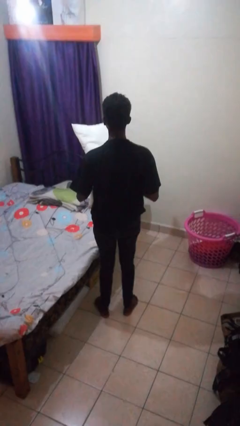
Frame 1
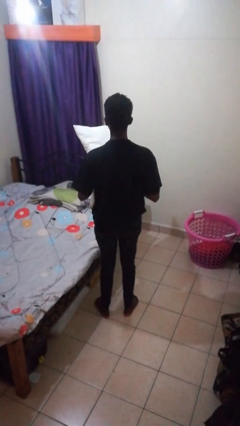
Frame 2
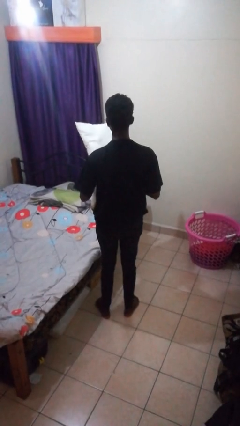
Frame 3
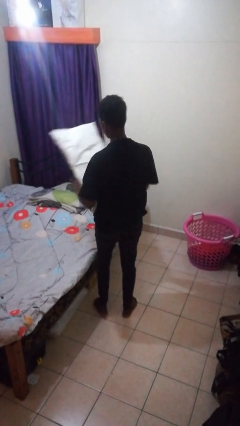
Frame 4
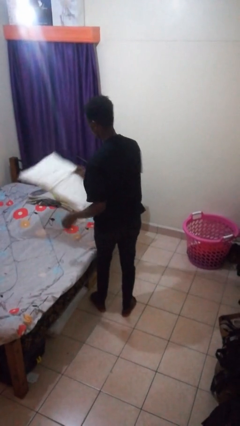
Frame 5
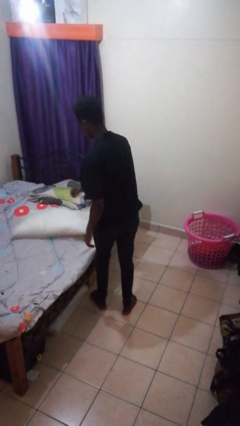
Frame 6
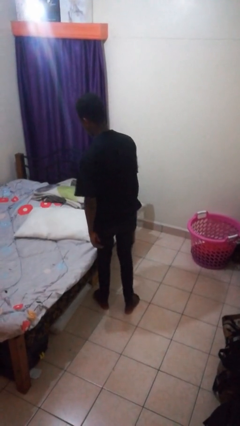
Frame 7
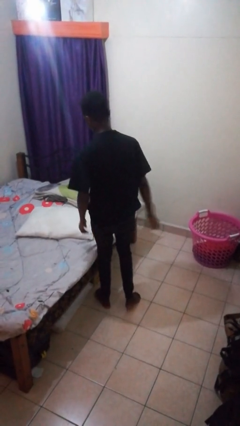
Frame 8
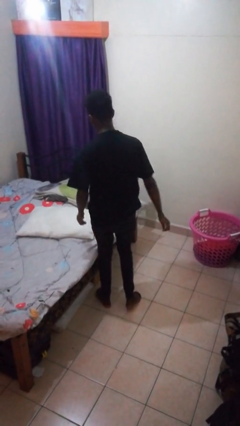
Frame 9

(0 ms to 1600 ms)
person puts down object on bed

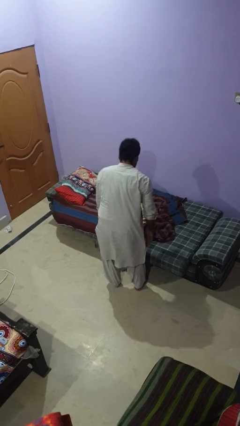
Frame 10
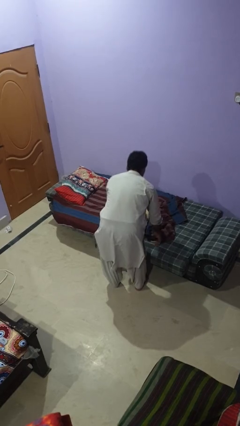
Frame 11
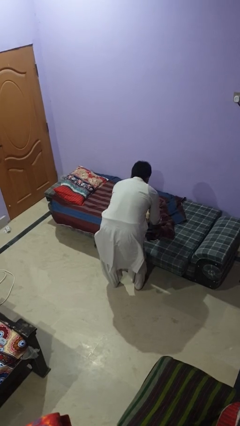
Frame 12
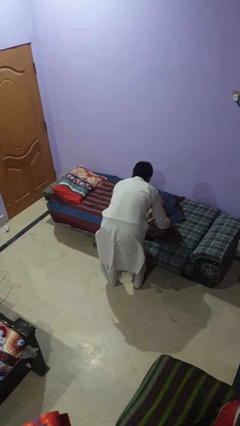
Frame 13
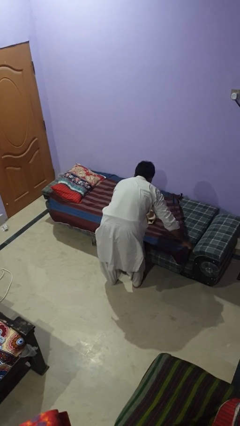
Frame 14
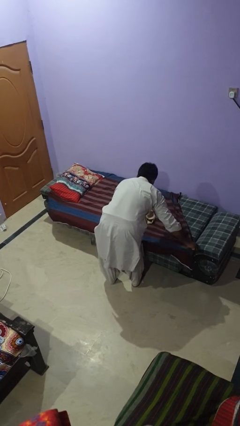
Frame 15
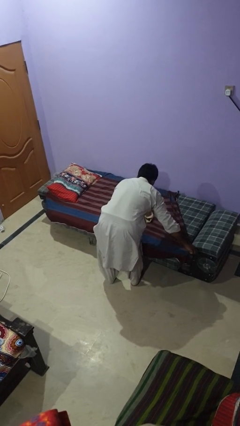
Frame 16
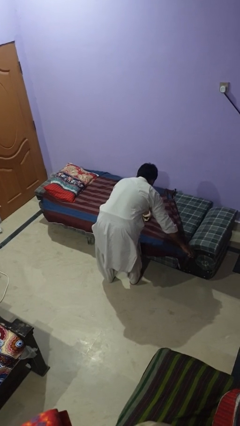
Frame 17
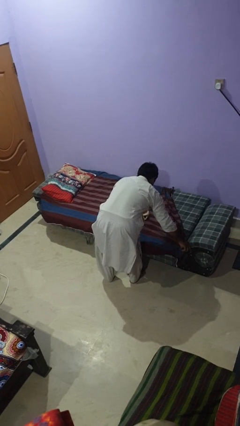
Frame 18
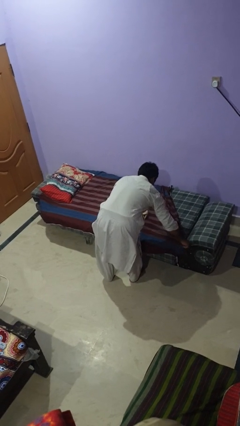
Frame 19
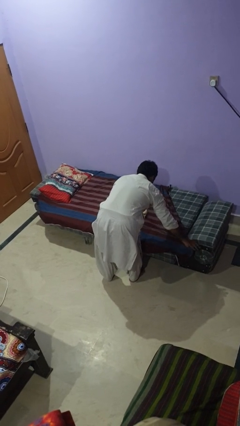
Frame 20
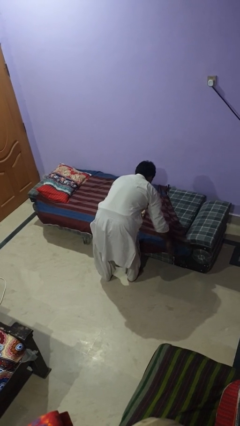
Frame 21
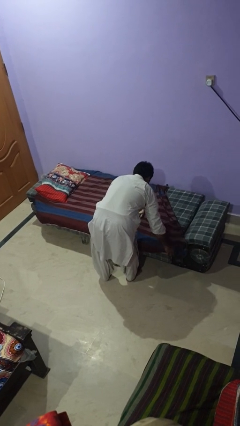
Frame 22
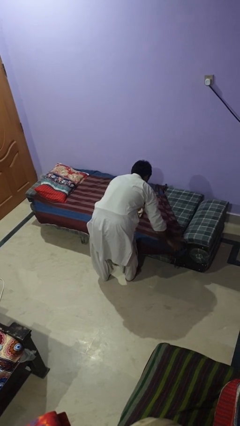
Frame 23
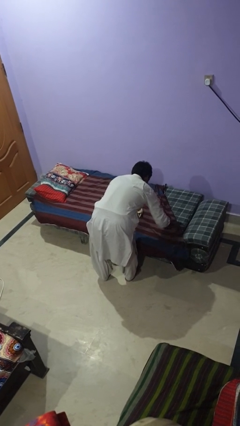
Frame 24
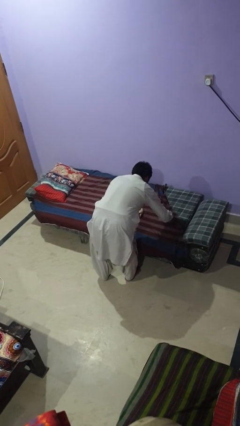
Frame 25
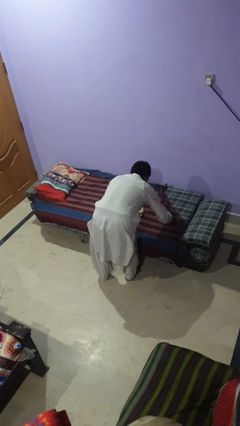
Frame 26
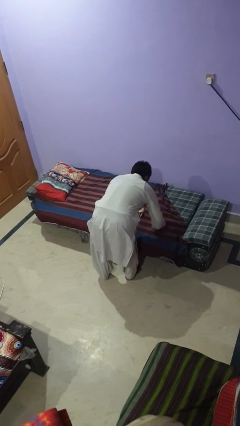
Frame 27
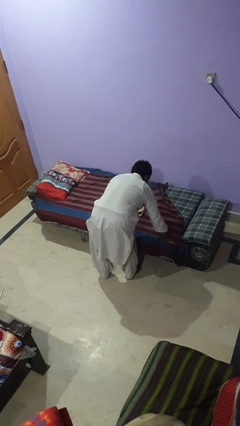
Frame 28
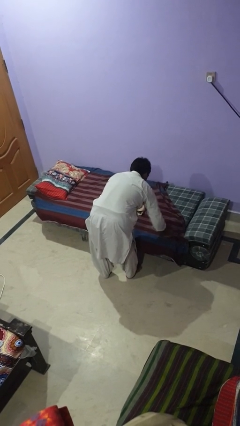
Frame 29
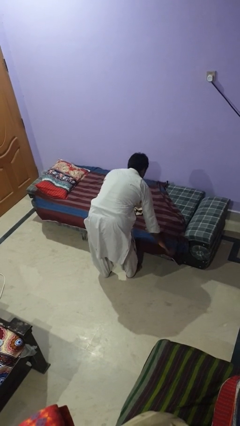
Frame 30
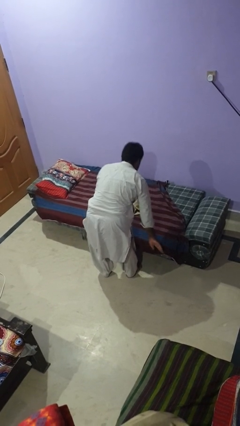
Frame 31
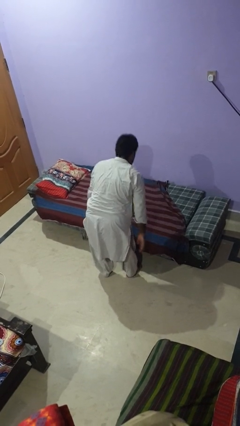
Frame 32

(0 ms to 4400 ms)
person makes bed

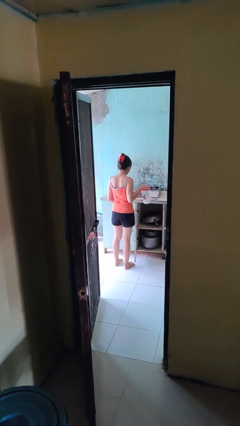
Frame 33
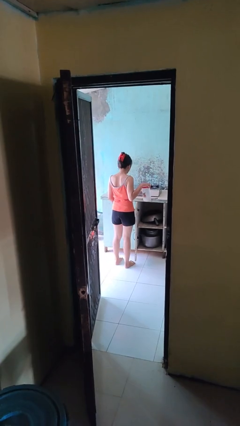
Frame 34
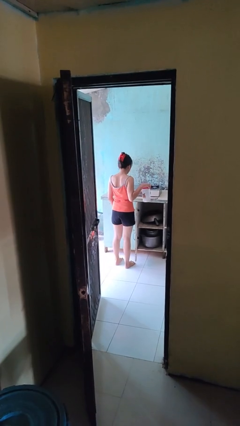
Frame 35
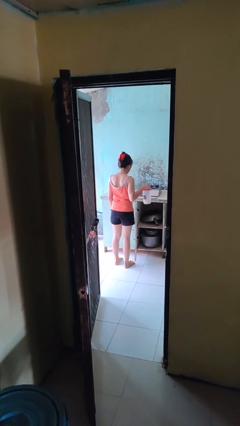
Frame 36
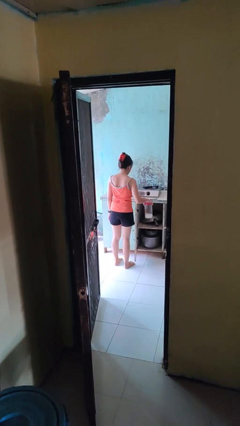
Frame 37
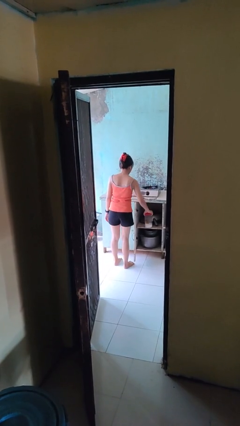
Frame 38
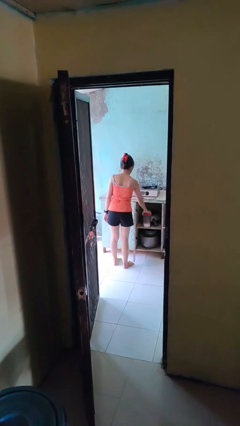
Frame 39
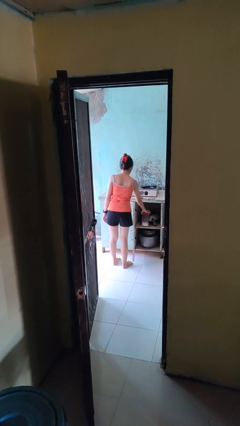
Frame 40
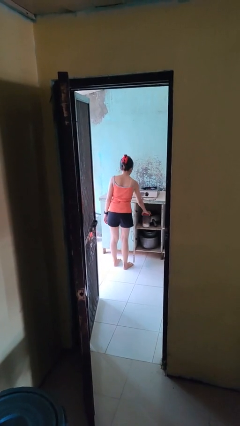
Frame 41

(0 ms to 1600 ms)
person puts down object into cabinet

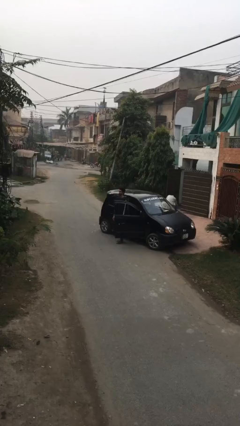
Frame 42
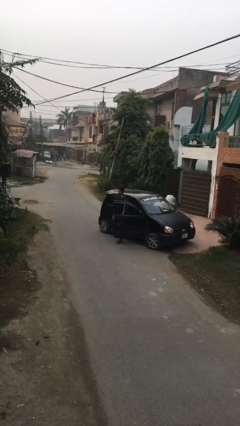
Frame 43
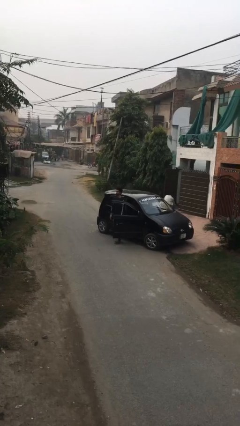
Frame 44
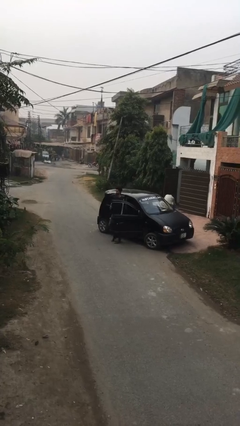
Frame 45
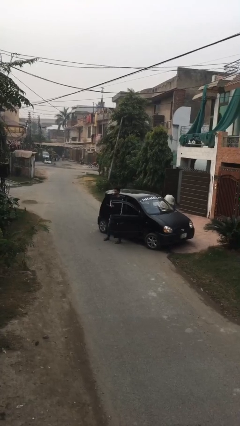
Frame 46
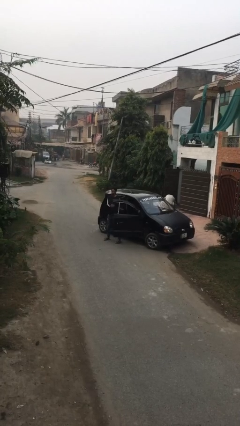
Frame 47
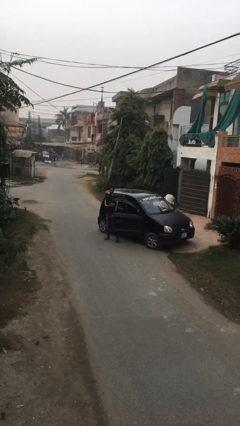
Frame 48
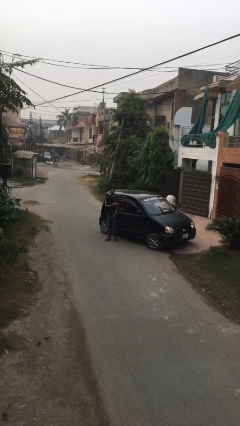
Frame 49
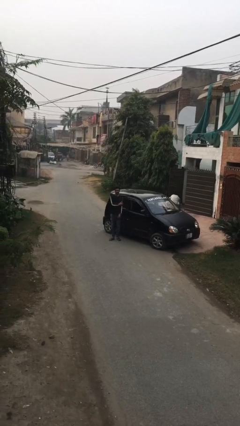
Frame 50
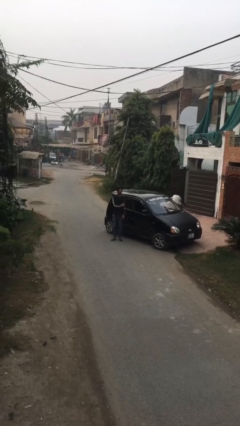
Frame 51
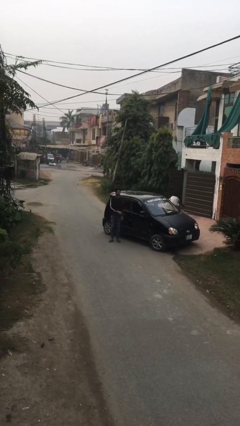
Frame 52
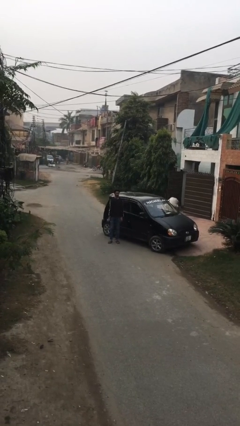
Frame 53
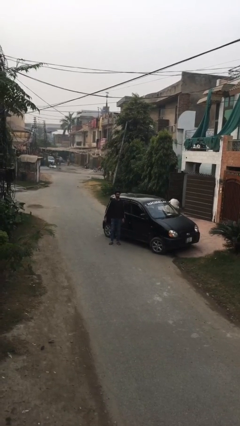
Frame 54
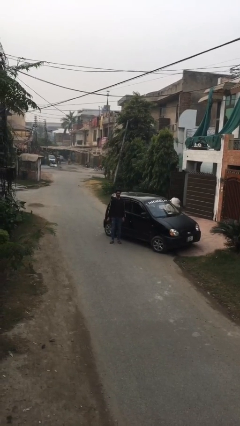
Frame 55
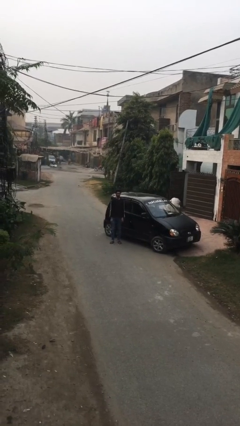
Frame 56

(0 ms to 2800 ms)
person closes car door

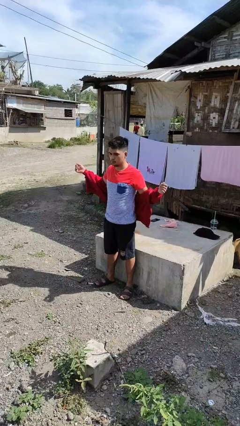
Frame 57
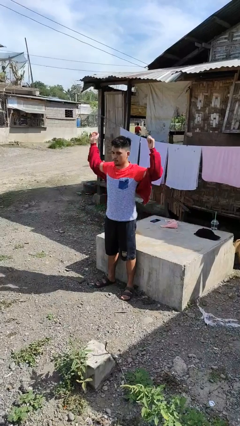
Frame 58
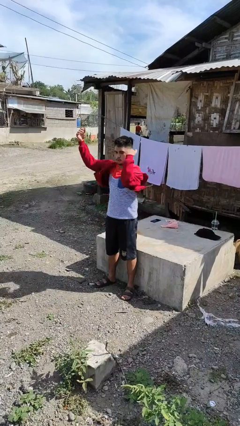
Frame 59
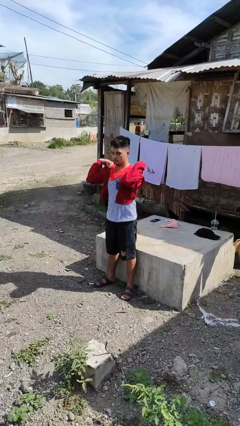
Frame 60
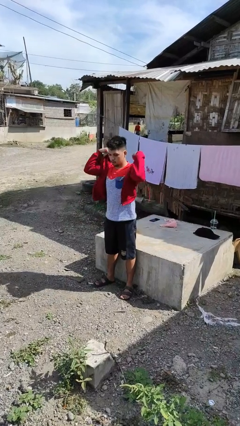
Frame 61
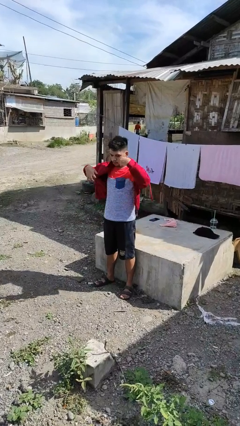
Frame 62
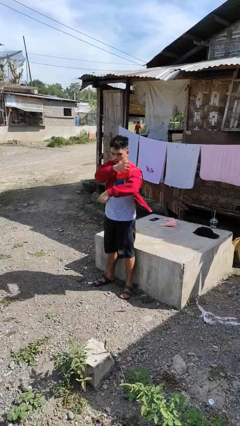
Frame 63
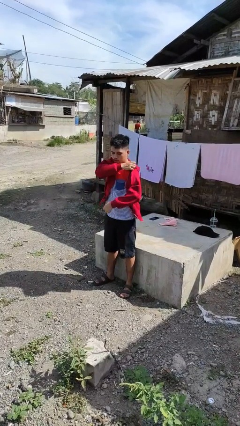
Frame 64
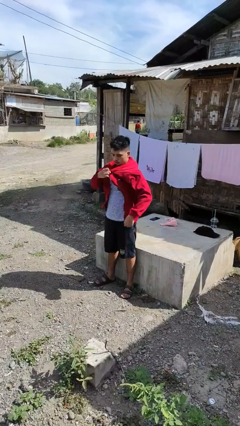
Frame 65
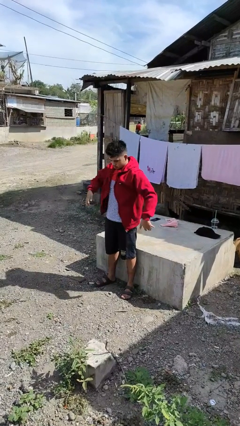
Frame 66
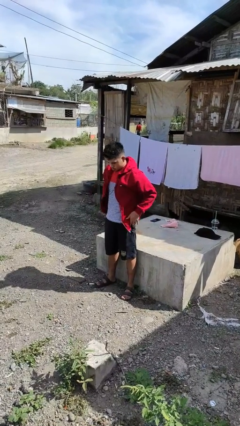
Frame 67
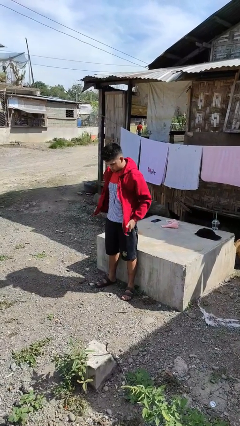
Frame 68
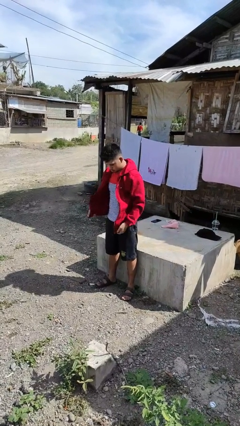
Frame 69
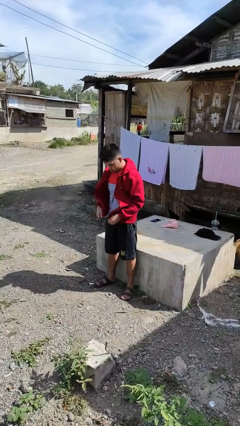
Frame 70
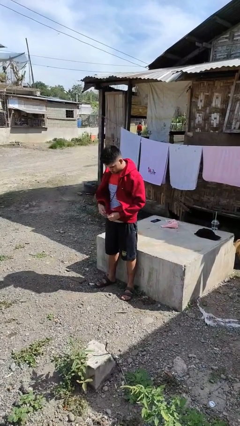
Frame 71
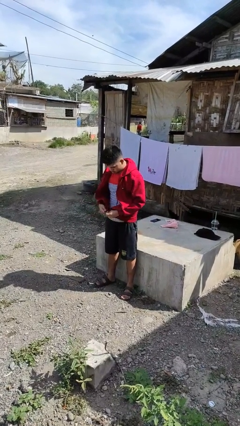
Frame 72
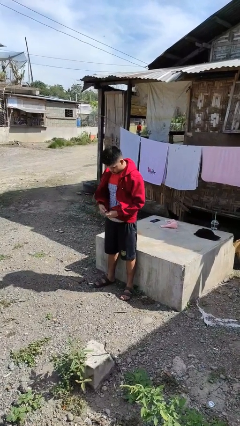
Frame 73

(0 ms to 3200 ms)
person puts on jacket

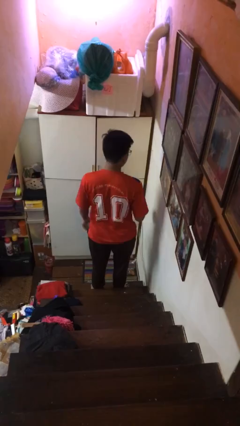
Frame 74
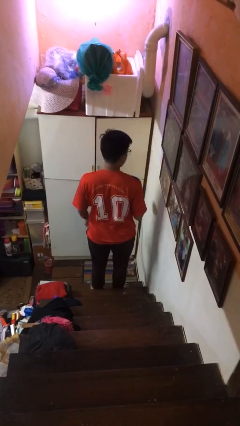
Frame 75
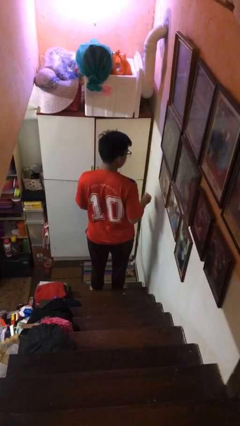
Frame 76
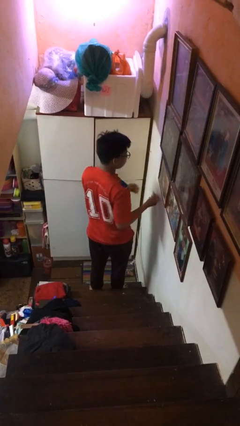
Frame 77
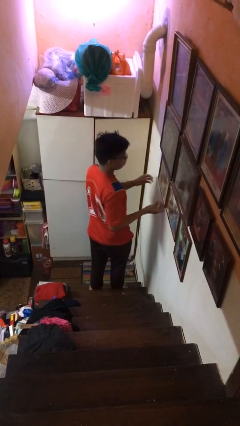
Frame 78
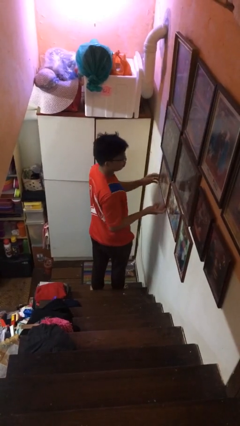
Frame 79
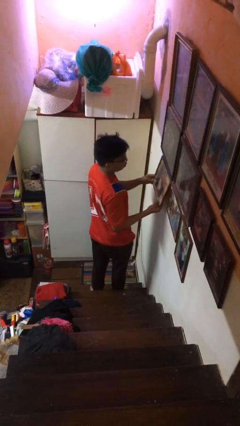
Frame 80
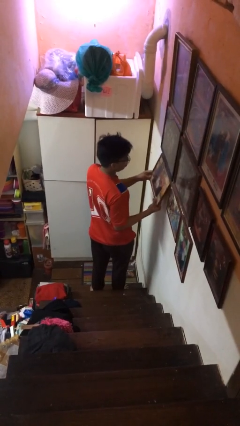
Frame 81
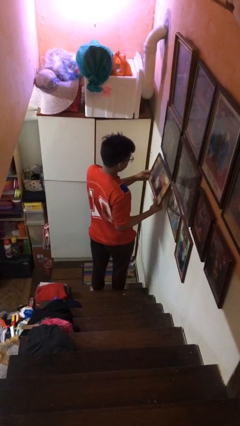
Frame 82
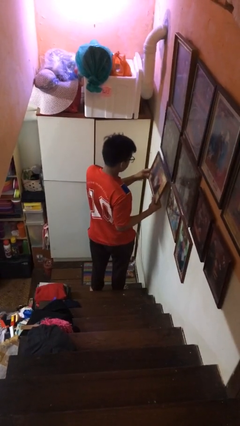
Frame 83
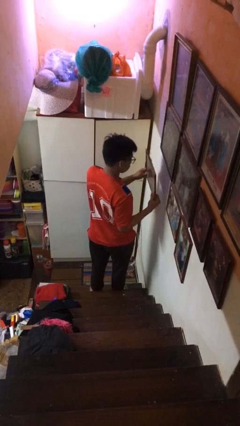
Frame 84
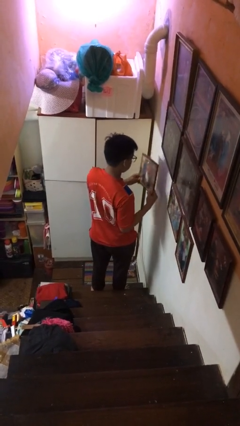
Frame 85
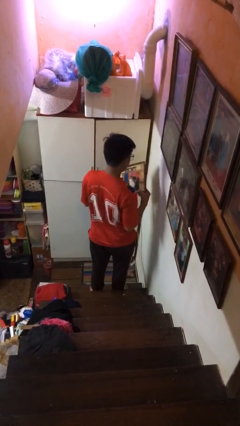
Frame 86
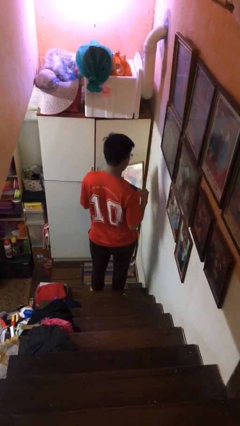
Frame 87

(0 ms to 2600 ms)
person takes down picture frame

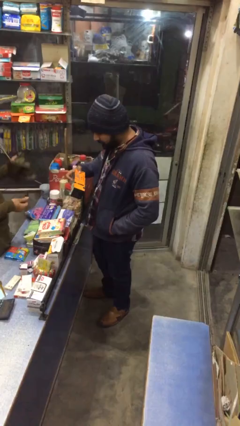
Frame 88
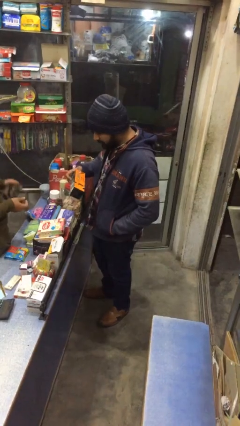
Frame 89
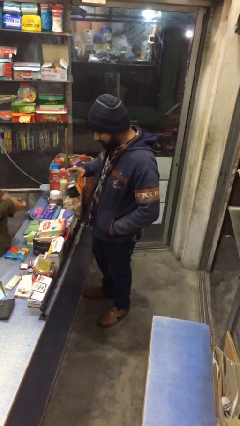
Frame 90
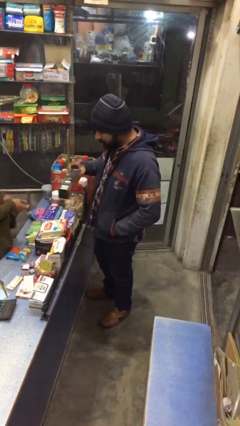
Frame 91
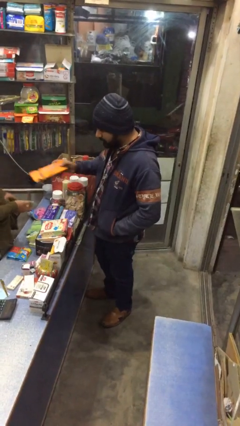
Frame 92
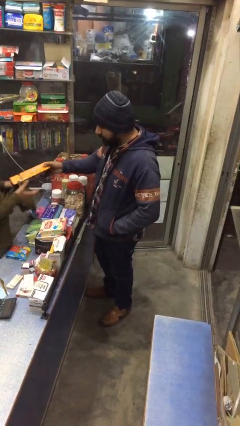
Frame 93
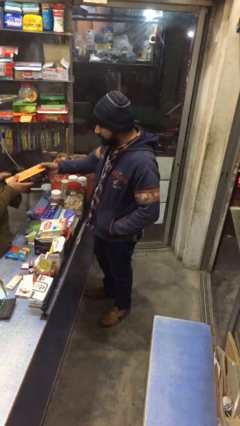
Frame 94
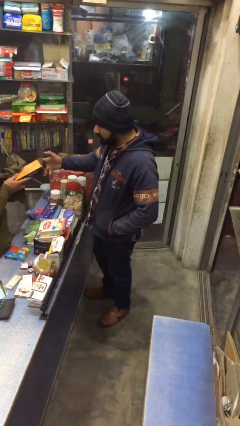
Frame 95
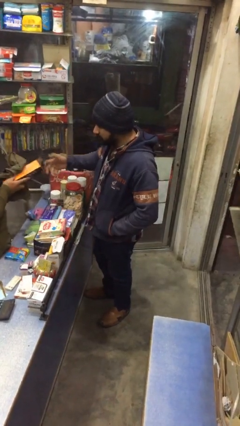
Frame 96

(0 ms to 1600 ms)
person transfers object to person
